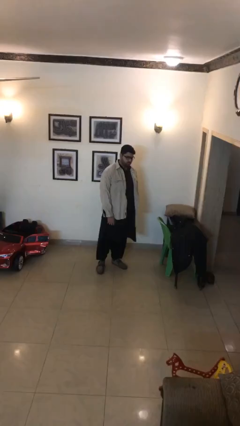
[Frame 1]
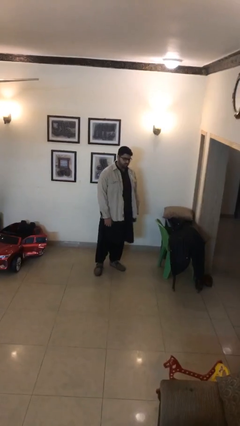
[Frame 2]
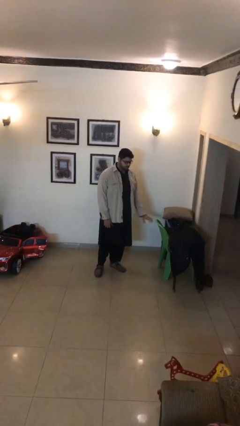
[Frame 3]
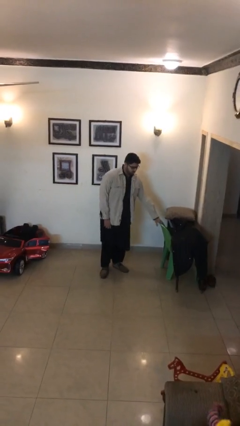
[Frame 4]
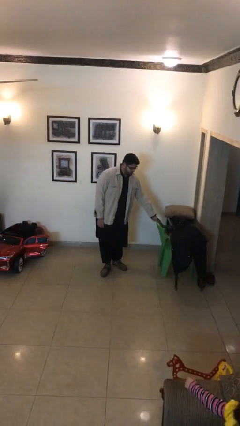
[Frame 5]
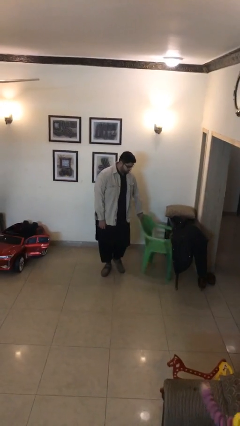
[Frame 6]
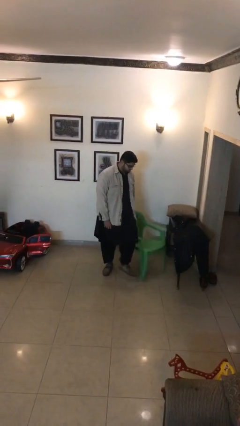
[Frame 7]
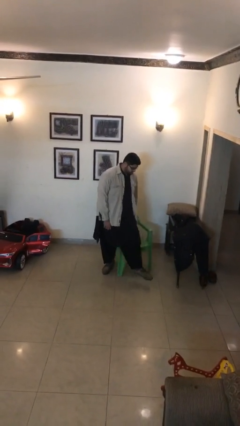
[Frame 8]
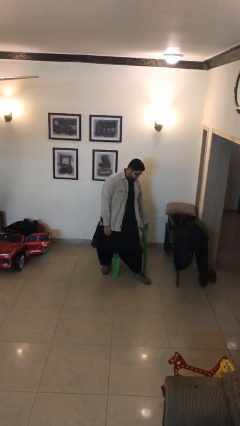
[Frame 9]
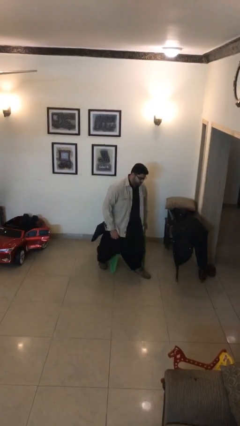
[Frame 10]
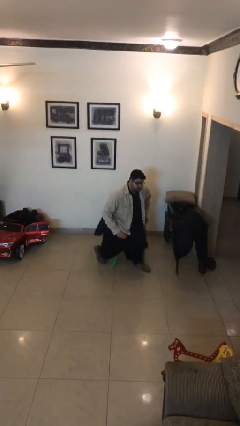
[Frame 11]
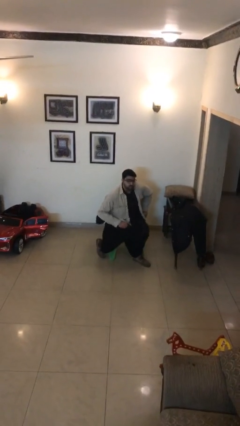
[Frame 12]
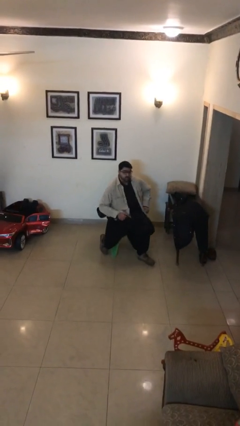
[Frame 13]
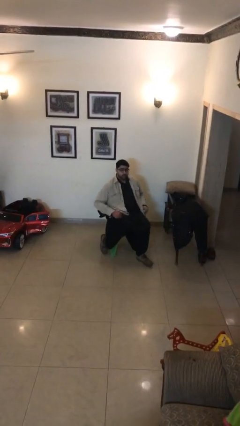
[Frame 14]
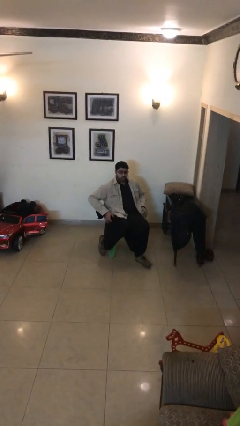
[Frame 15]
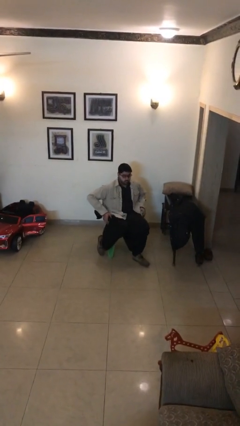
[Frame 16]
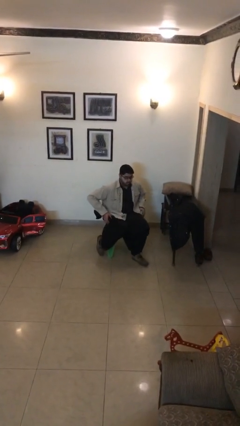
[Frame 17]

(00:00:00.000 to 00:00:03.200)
person sits down

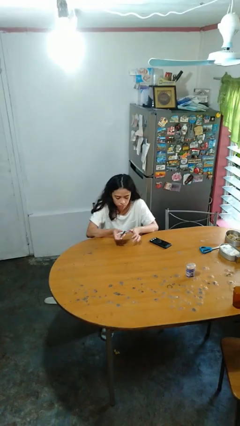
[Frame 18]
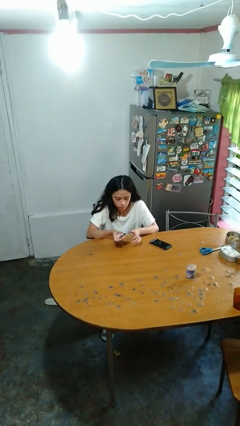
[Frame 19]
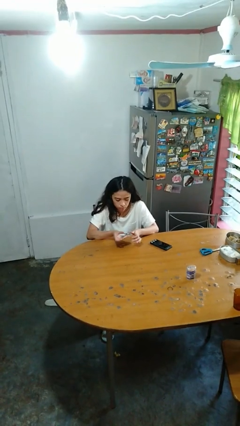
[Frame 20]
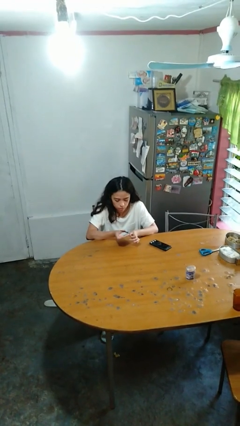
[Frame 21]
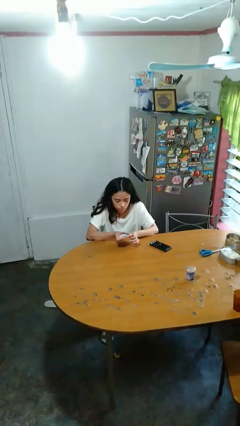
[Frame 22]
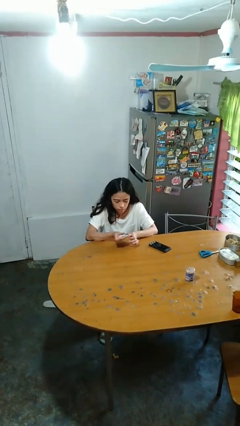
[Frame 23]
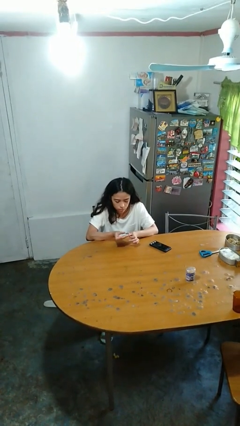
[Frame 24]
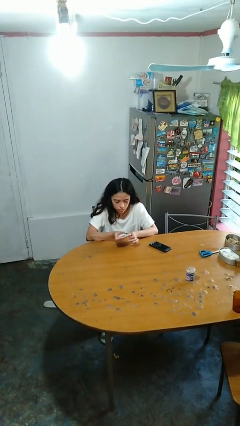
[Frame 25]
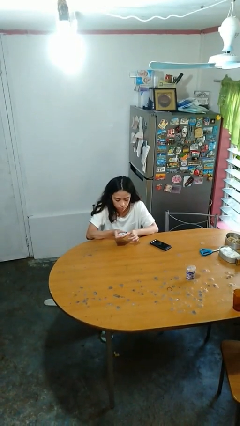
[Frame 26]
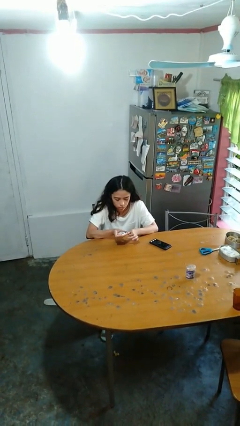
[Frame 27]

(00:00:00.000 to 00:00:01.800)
person clips fingernails

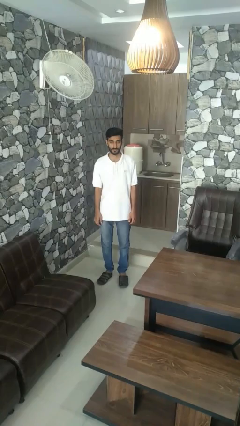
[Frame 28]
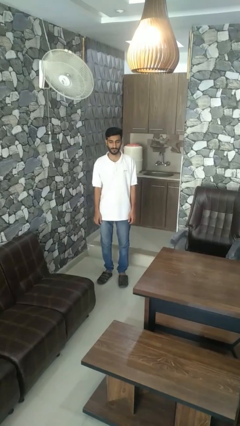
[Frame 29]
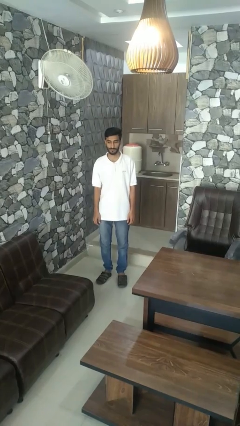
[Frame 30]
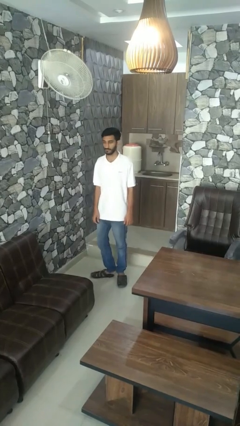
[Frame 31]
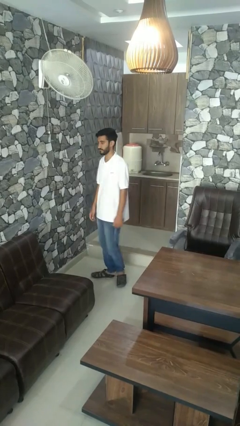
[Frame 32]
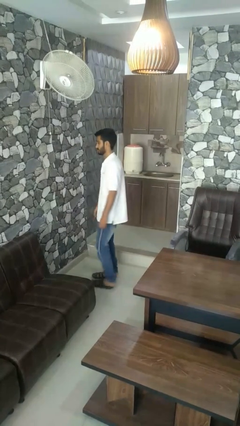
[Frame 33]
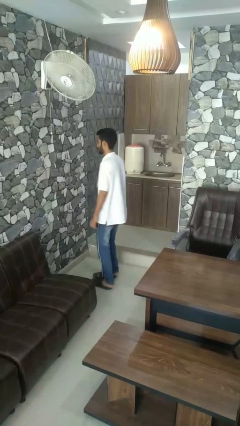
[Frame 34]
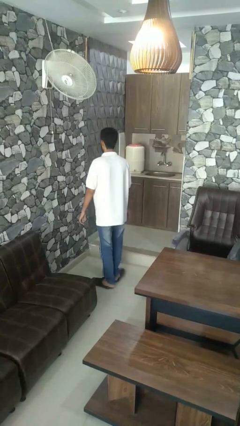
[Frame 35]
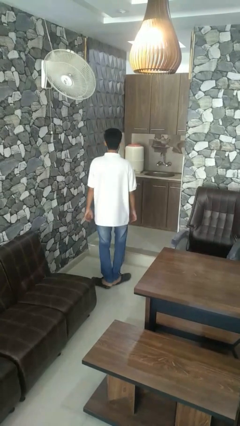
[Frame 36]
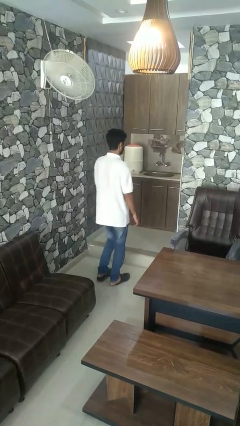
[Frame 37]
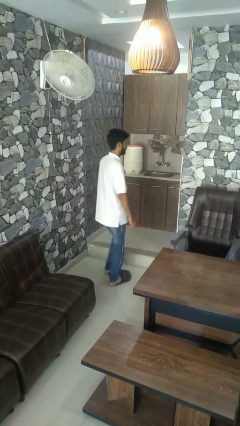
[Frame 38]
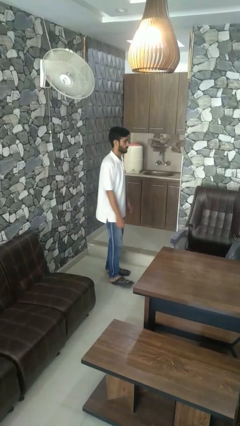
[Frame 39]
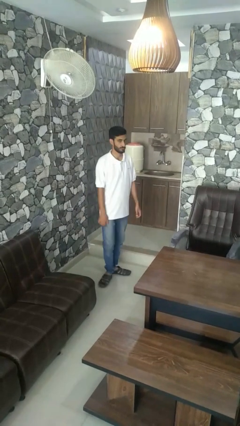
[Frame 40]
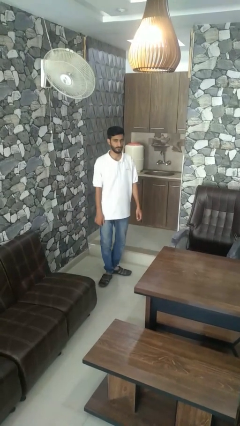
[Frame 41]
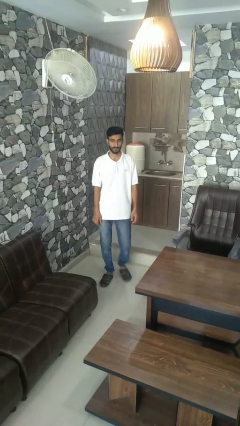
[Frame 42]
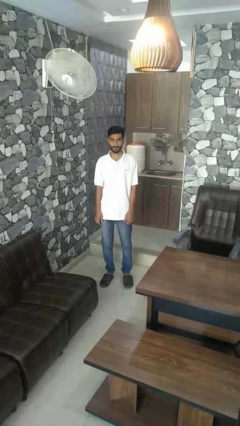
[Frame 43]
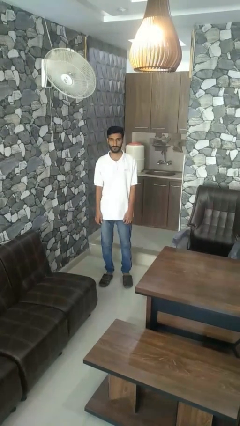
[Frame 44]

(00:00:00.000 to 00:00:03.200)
person twirls

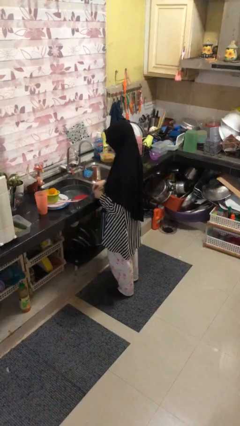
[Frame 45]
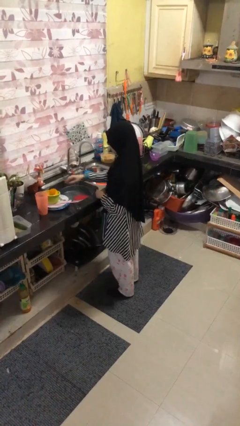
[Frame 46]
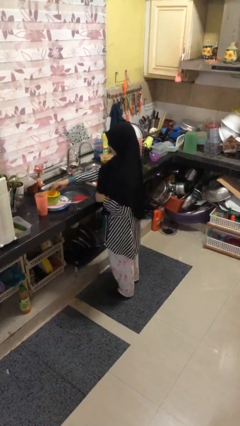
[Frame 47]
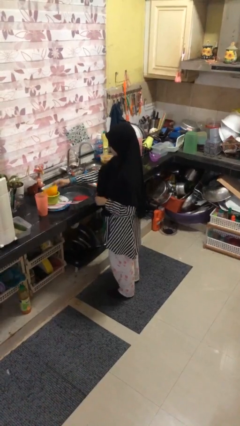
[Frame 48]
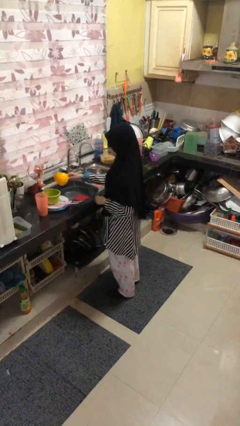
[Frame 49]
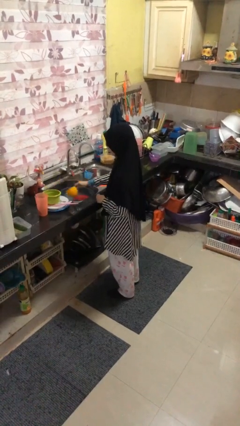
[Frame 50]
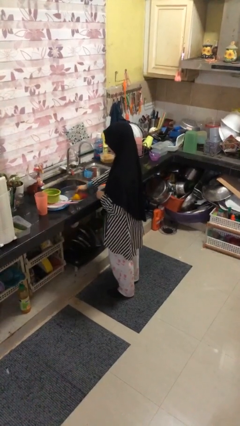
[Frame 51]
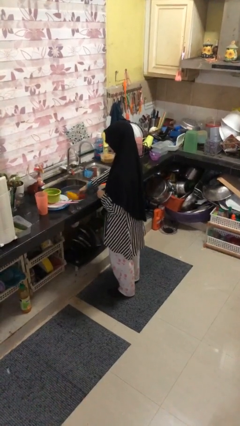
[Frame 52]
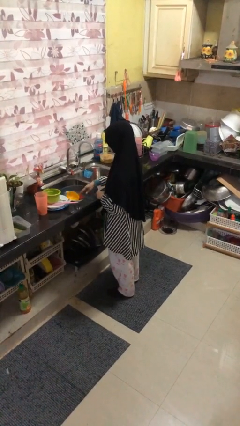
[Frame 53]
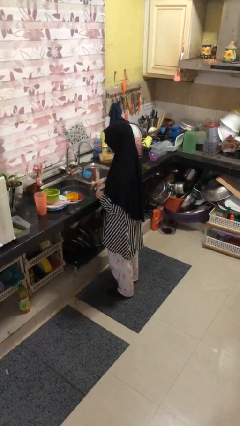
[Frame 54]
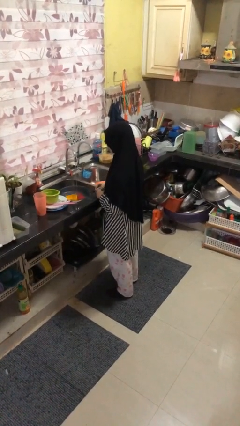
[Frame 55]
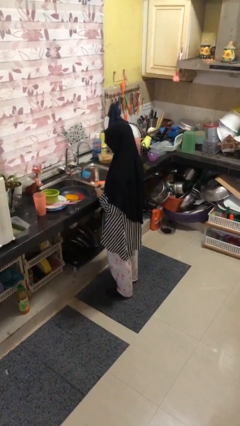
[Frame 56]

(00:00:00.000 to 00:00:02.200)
person loads dishwasher

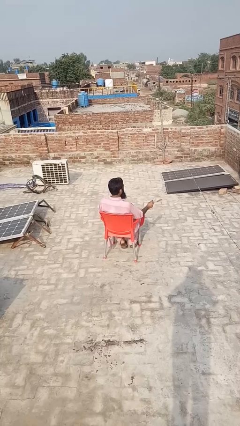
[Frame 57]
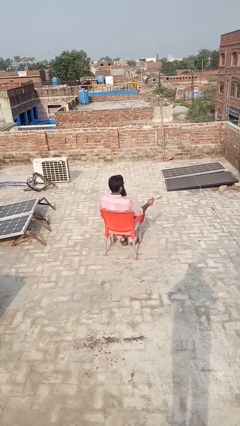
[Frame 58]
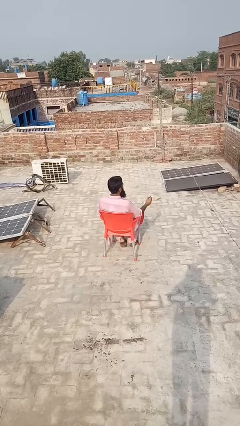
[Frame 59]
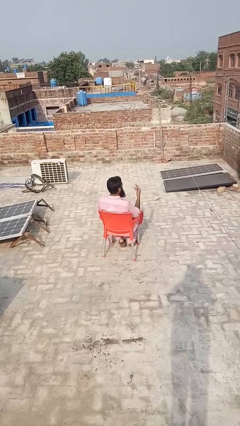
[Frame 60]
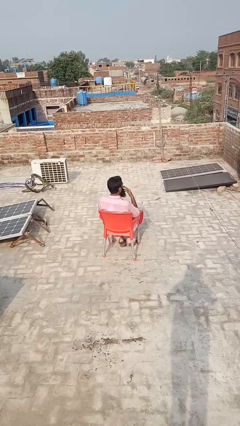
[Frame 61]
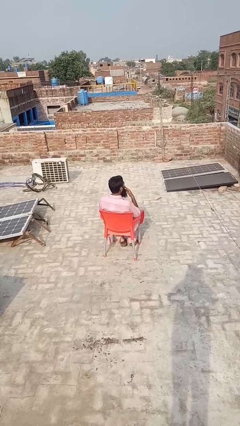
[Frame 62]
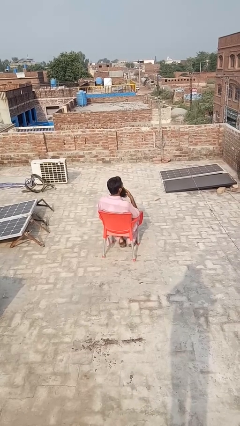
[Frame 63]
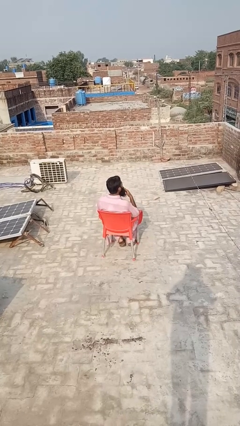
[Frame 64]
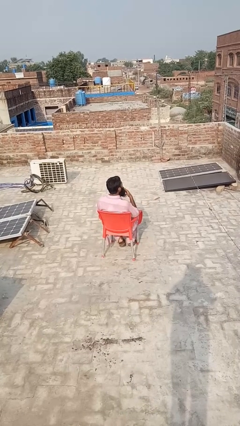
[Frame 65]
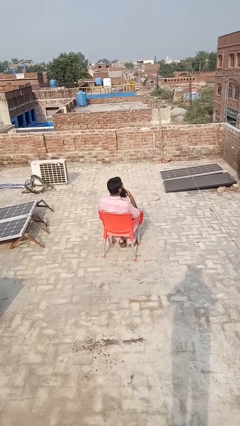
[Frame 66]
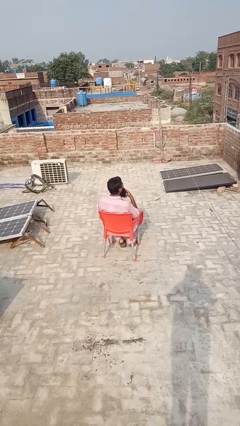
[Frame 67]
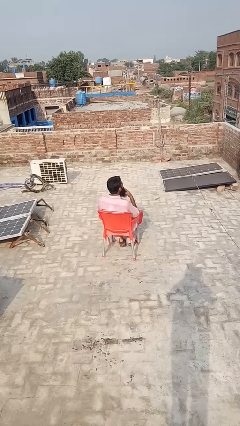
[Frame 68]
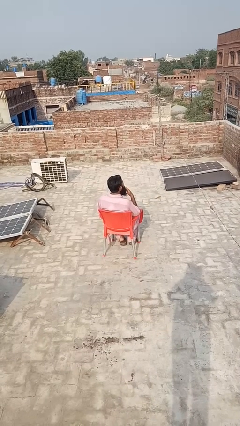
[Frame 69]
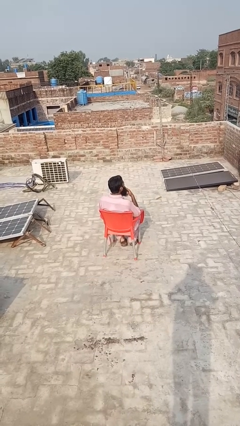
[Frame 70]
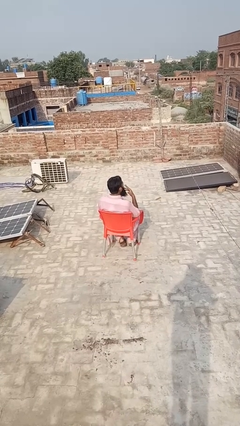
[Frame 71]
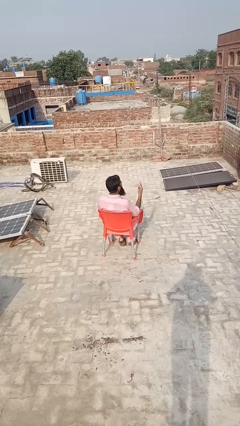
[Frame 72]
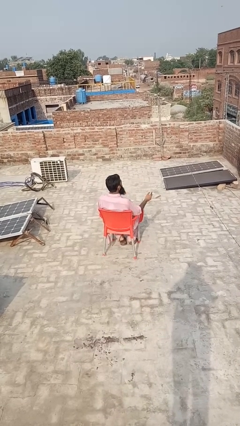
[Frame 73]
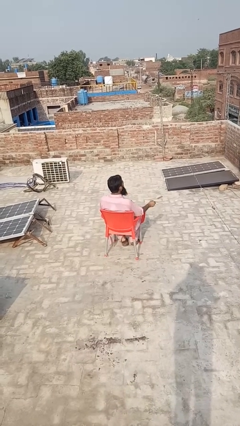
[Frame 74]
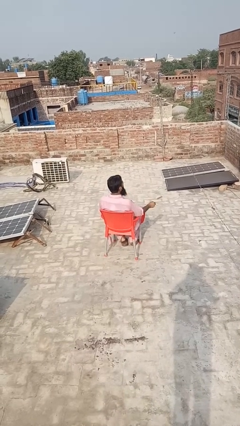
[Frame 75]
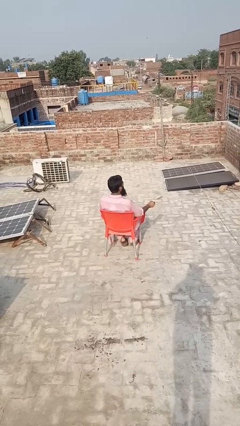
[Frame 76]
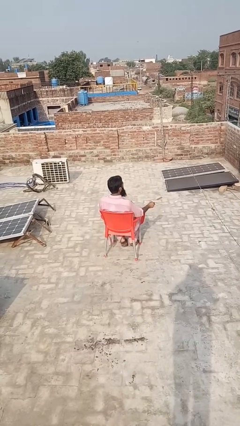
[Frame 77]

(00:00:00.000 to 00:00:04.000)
person vapes

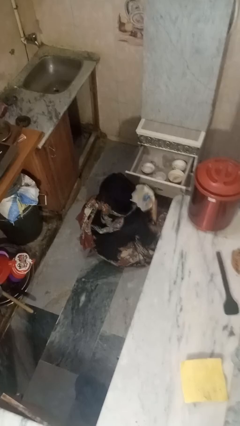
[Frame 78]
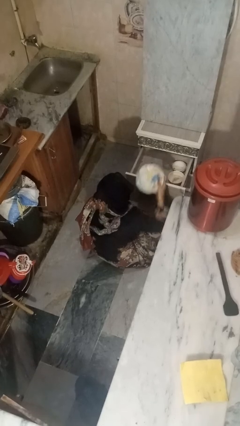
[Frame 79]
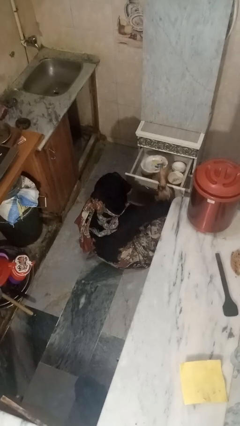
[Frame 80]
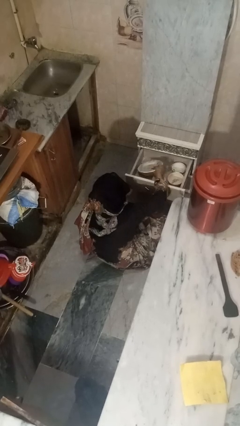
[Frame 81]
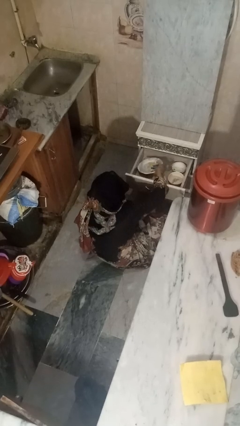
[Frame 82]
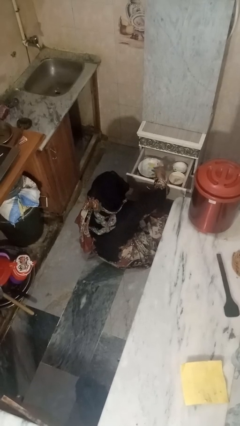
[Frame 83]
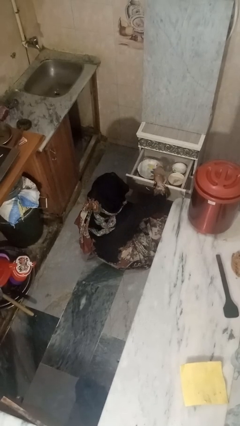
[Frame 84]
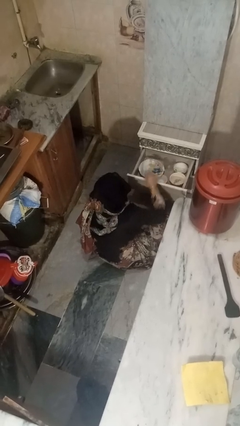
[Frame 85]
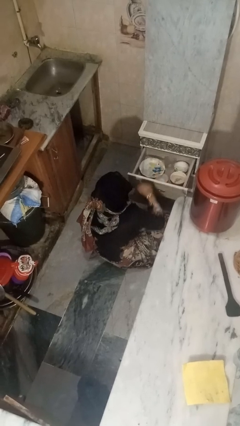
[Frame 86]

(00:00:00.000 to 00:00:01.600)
person puts object into kitchen drawer

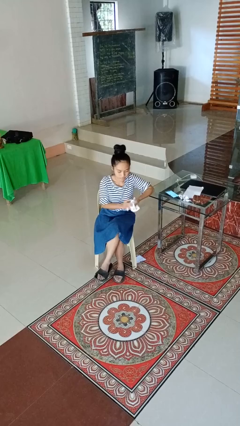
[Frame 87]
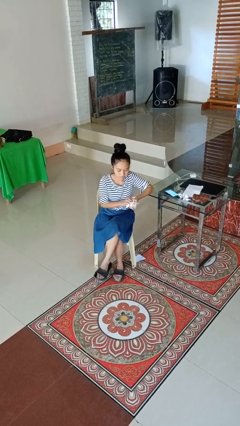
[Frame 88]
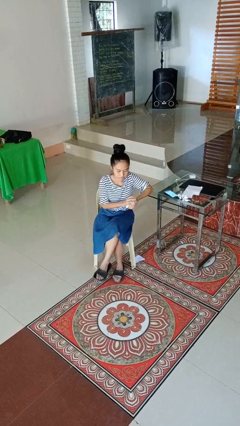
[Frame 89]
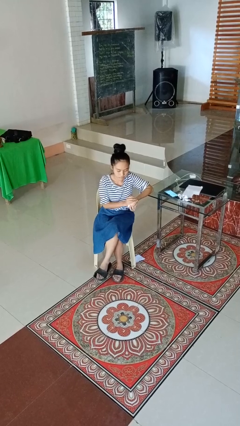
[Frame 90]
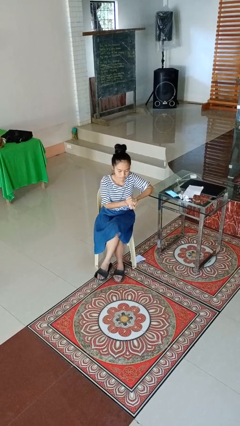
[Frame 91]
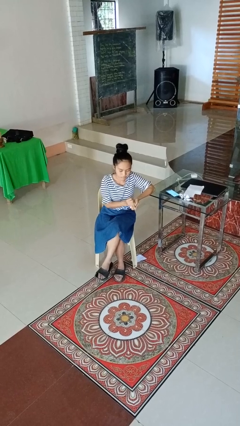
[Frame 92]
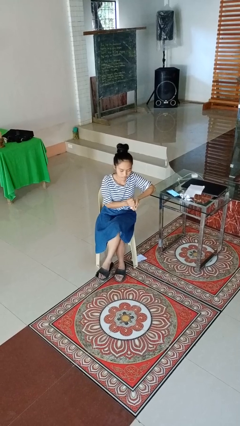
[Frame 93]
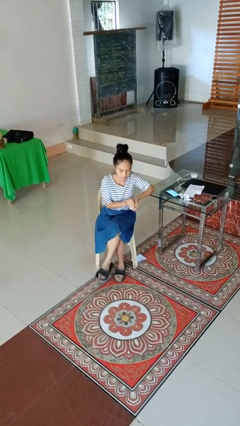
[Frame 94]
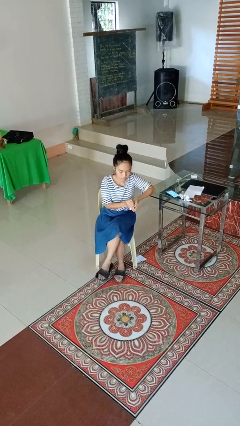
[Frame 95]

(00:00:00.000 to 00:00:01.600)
person crumples paper
